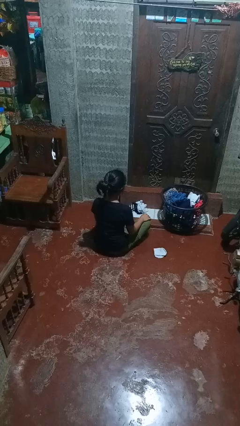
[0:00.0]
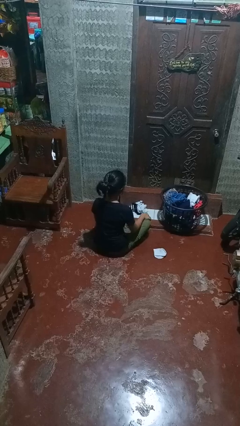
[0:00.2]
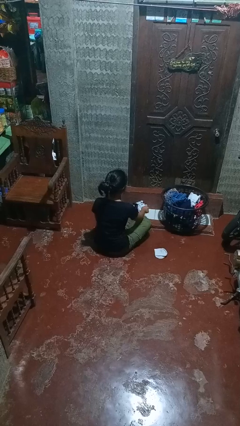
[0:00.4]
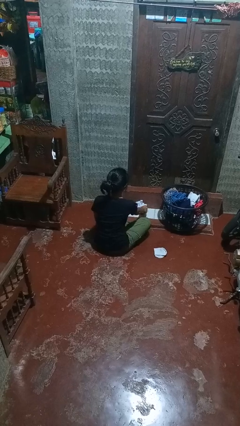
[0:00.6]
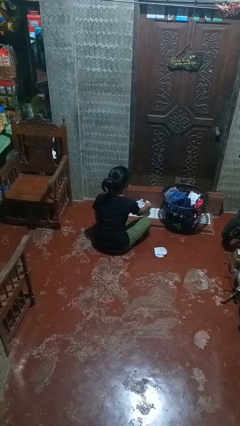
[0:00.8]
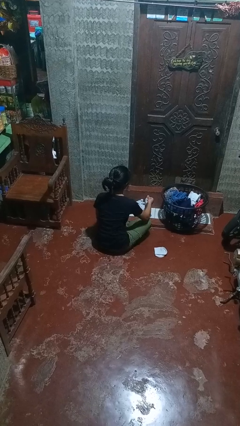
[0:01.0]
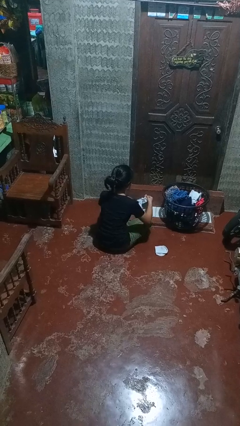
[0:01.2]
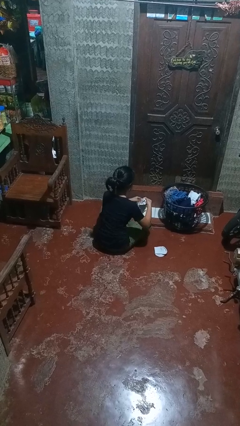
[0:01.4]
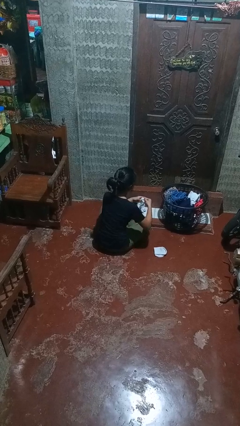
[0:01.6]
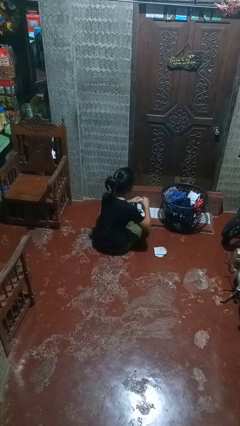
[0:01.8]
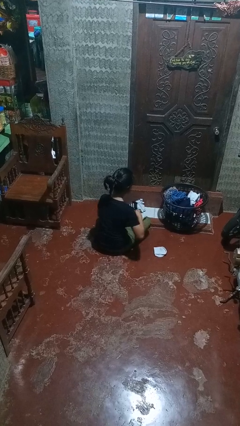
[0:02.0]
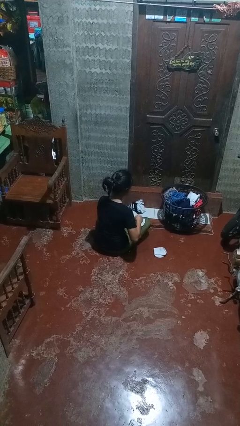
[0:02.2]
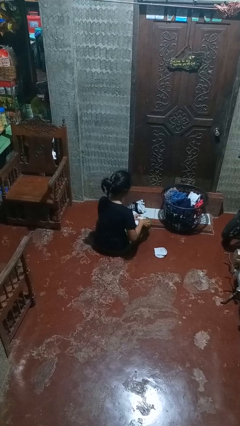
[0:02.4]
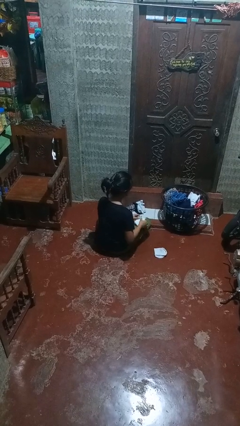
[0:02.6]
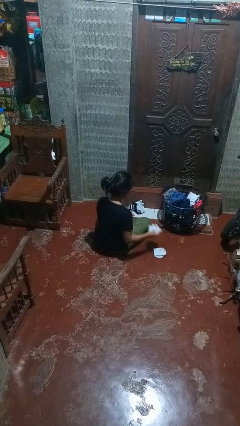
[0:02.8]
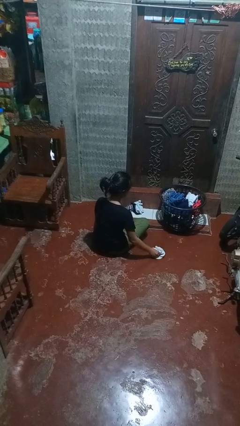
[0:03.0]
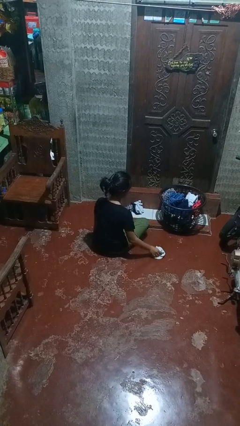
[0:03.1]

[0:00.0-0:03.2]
person folds socks

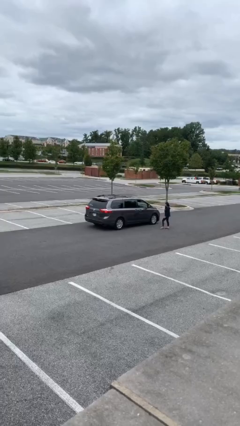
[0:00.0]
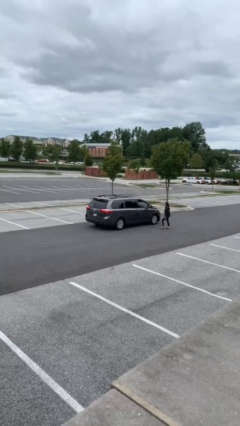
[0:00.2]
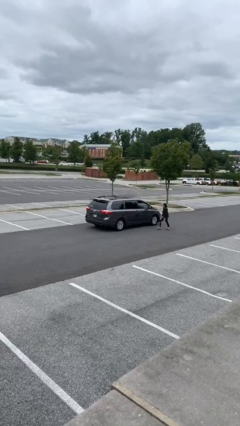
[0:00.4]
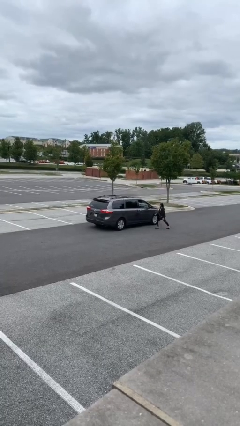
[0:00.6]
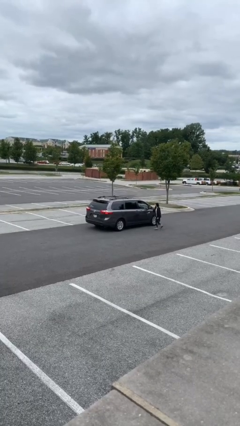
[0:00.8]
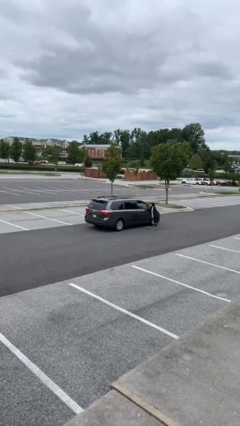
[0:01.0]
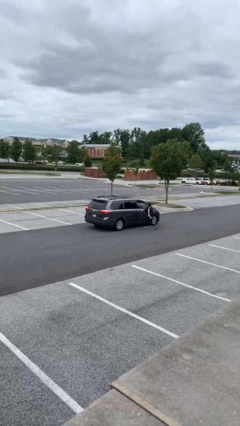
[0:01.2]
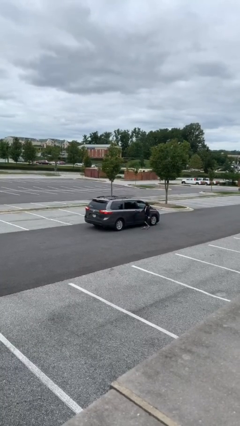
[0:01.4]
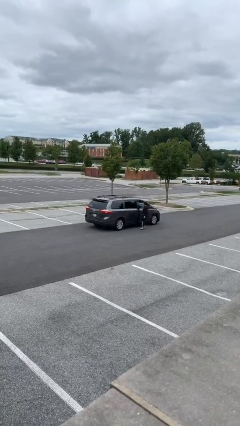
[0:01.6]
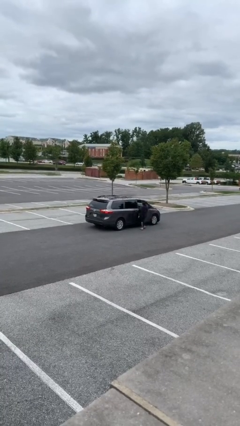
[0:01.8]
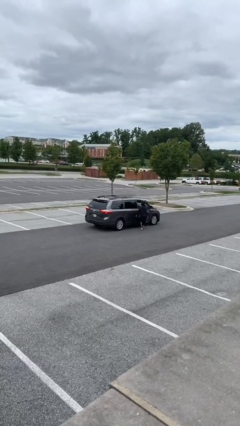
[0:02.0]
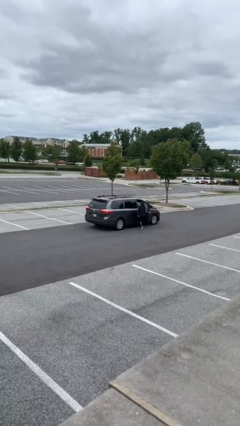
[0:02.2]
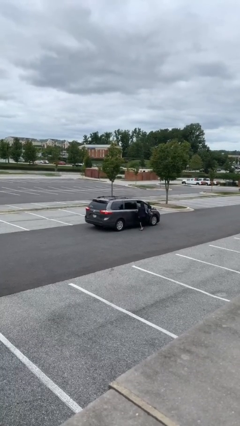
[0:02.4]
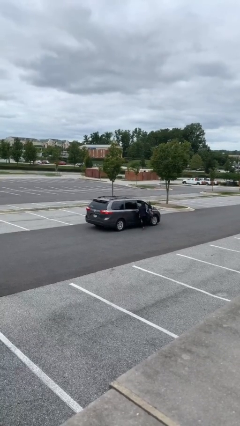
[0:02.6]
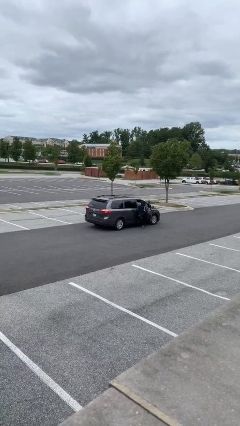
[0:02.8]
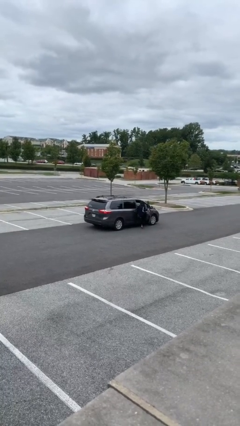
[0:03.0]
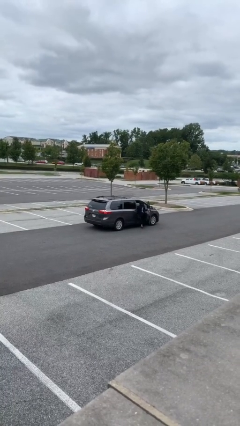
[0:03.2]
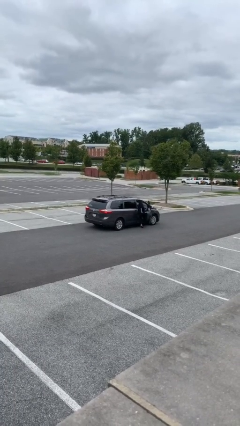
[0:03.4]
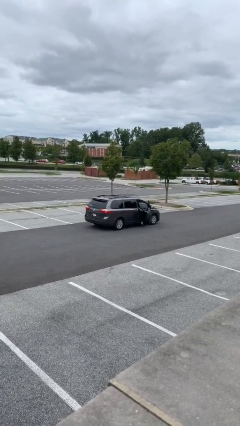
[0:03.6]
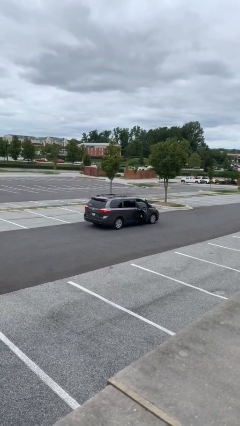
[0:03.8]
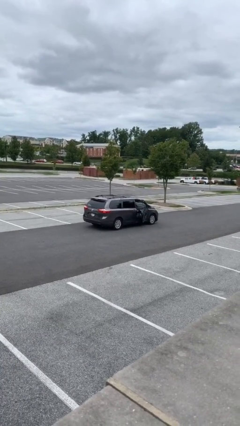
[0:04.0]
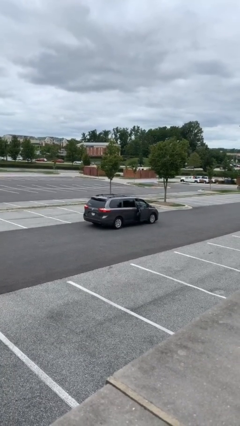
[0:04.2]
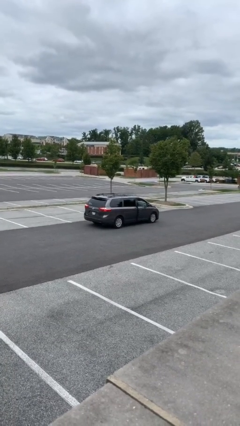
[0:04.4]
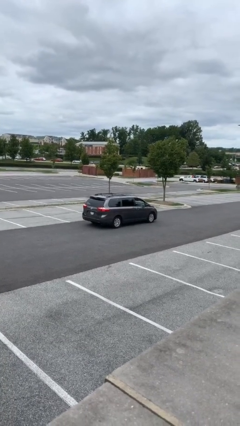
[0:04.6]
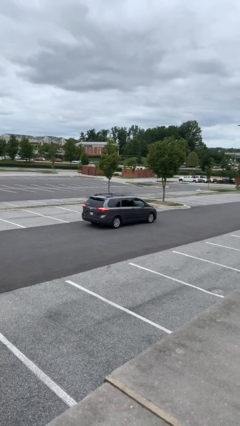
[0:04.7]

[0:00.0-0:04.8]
car picks up person

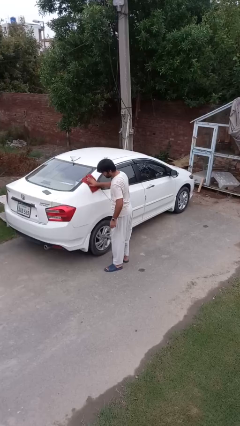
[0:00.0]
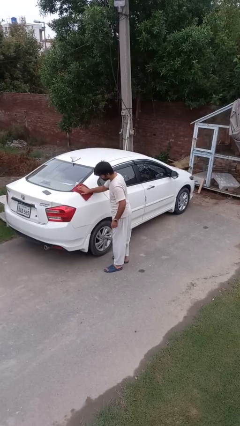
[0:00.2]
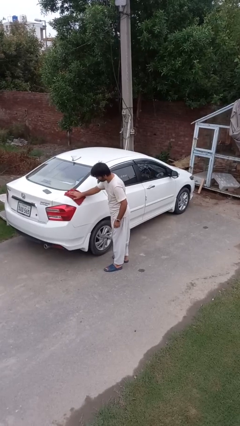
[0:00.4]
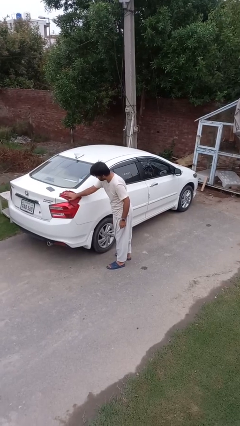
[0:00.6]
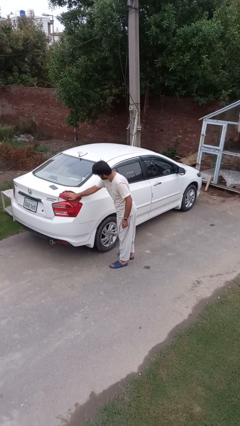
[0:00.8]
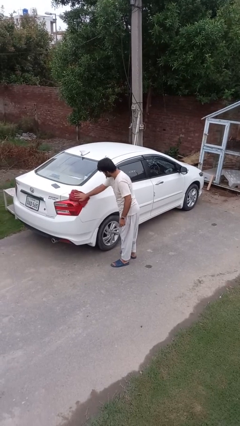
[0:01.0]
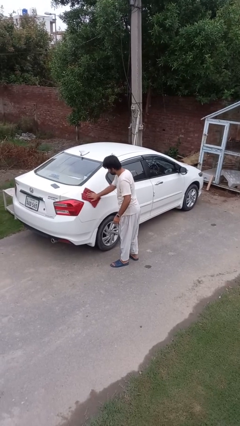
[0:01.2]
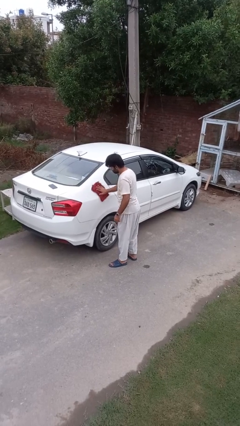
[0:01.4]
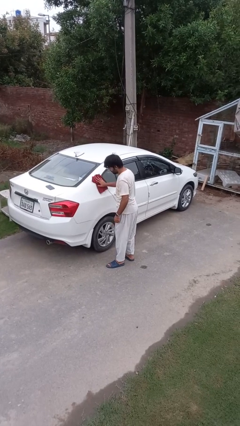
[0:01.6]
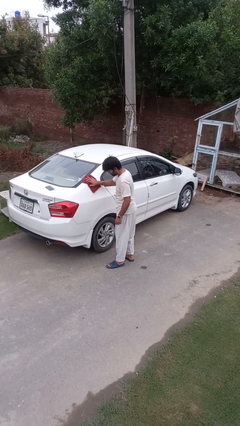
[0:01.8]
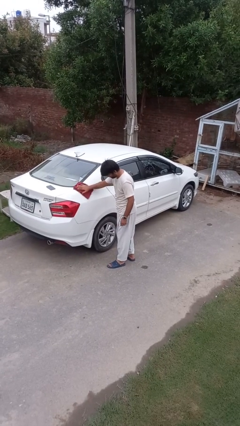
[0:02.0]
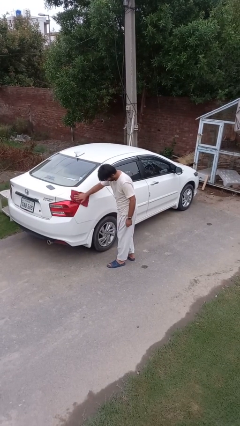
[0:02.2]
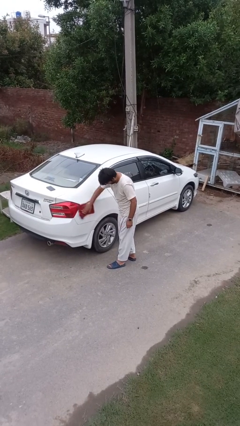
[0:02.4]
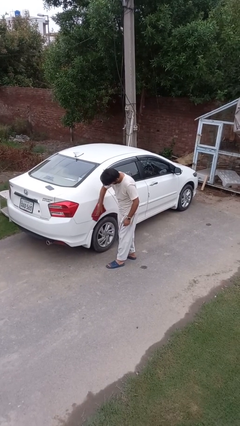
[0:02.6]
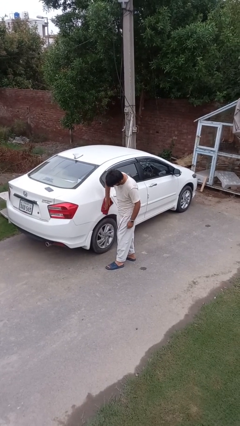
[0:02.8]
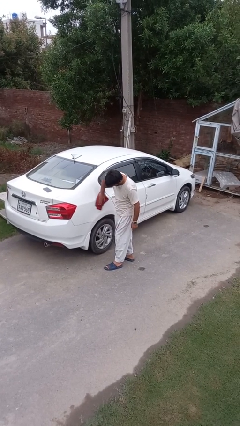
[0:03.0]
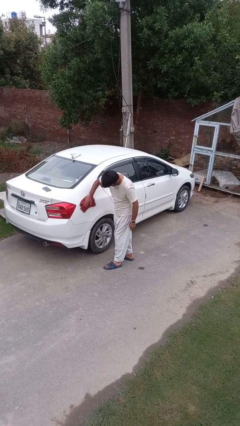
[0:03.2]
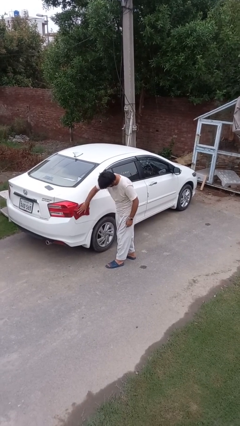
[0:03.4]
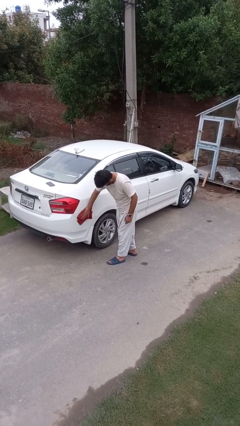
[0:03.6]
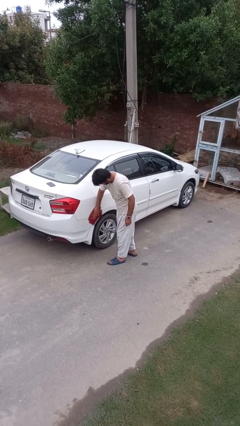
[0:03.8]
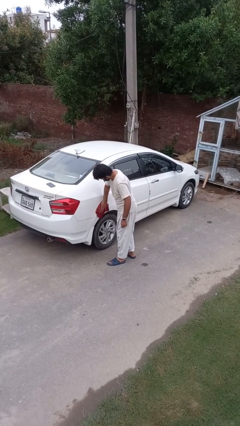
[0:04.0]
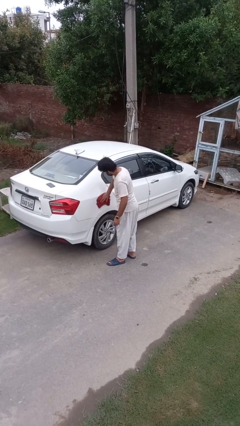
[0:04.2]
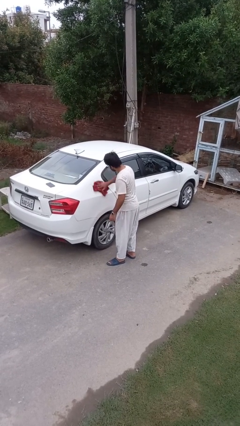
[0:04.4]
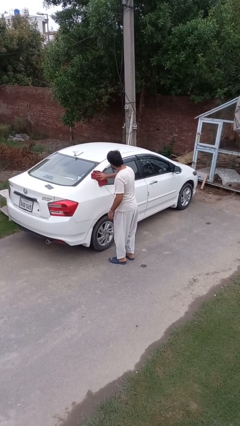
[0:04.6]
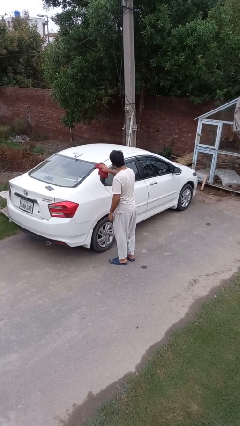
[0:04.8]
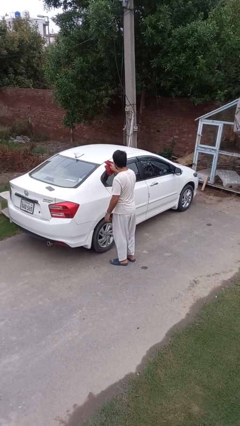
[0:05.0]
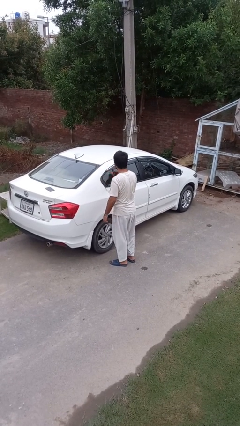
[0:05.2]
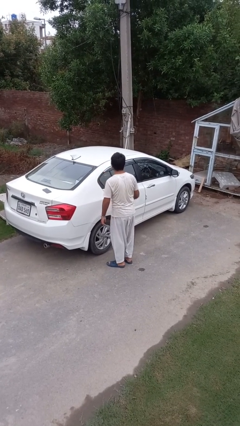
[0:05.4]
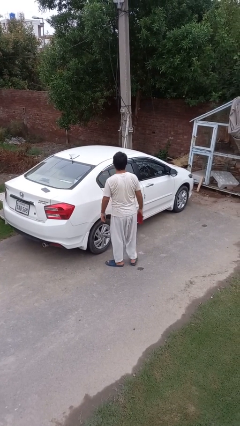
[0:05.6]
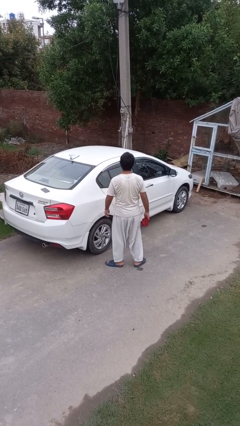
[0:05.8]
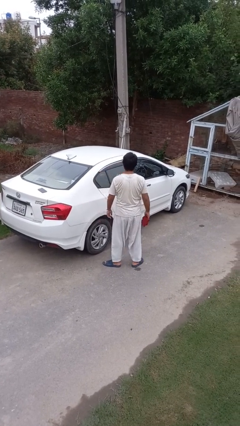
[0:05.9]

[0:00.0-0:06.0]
person polishes car with rag

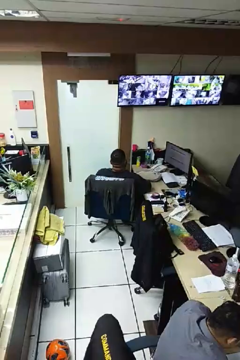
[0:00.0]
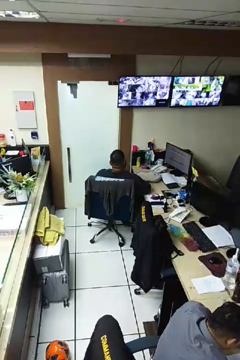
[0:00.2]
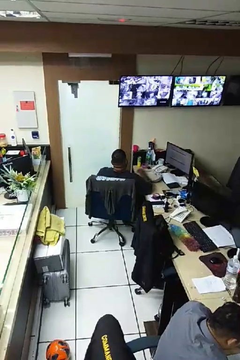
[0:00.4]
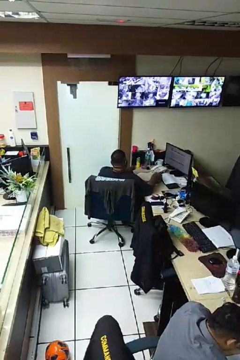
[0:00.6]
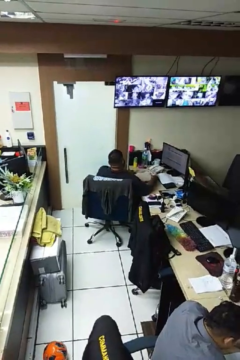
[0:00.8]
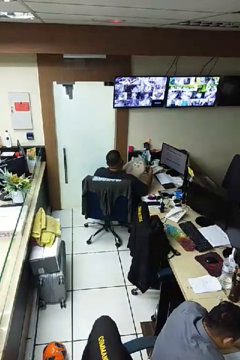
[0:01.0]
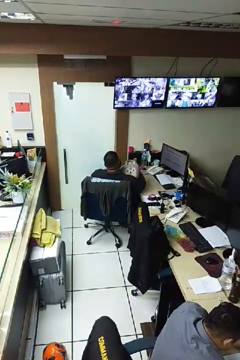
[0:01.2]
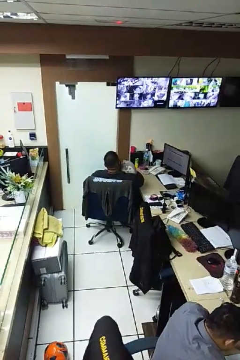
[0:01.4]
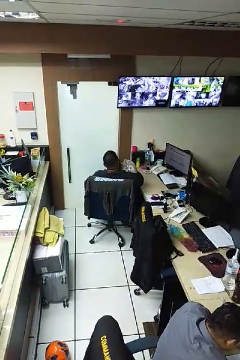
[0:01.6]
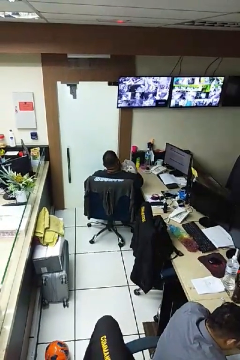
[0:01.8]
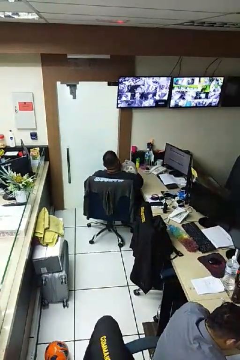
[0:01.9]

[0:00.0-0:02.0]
person hugs stuffed animal

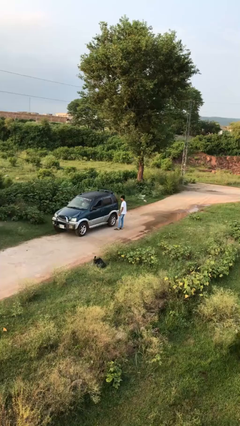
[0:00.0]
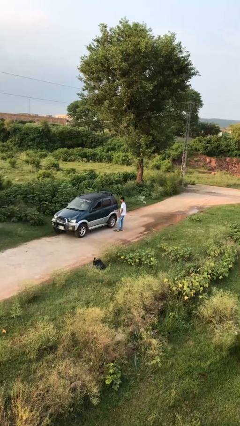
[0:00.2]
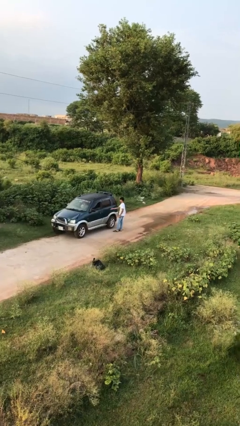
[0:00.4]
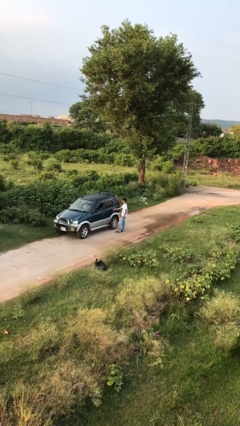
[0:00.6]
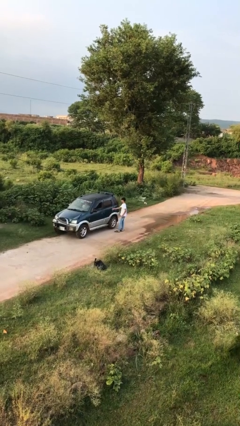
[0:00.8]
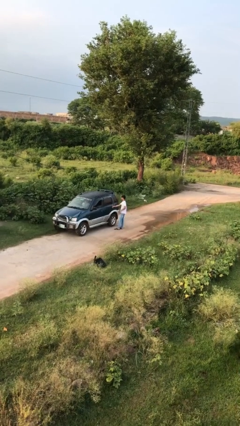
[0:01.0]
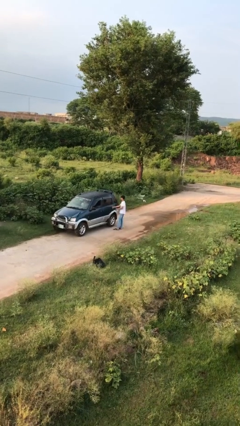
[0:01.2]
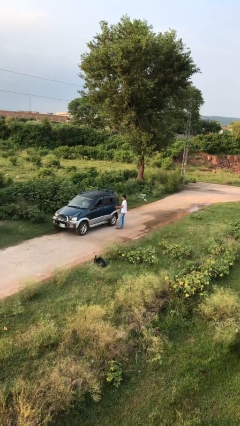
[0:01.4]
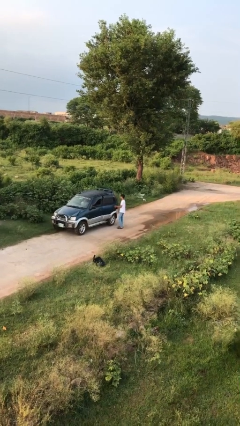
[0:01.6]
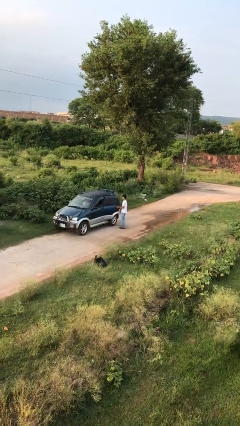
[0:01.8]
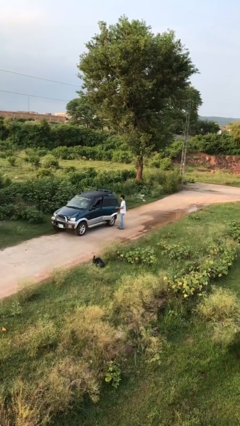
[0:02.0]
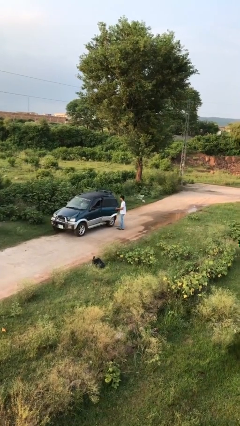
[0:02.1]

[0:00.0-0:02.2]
person opens car door
